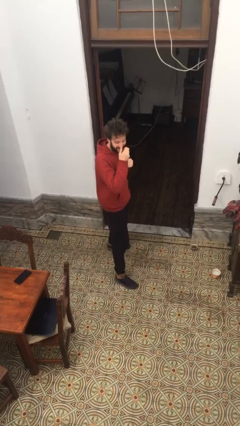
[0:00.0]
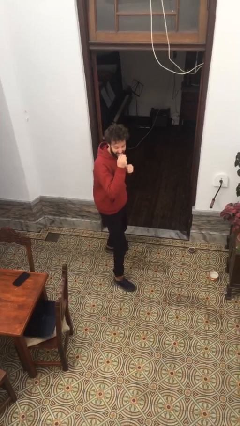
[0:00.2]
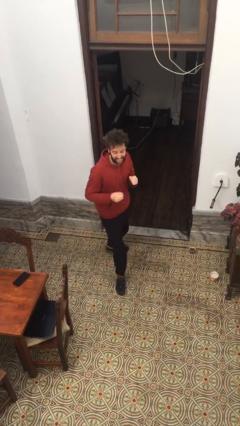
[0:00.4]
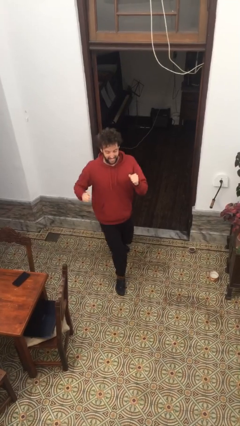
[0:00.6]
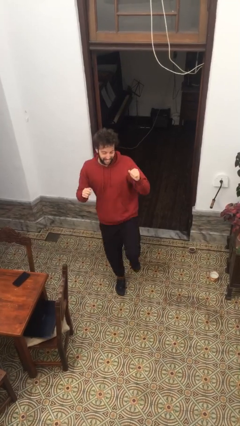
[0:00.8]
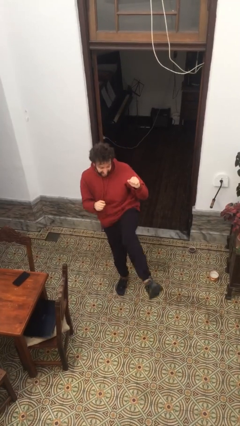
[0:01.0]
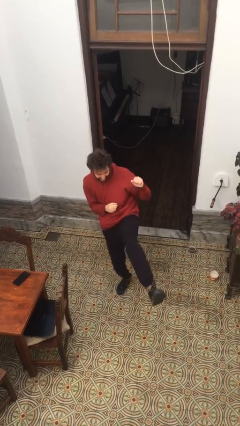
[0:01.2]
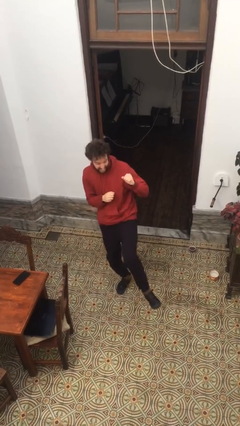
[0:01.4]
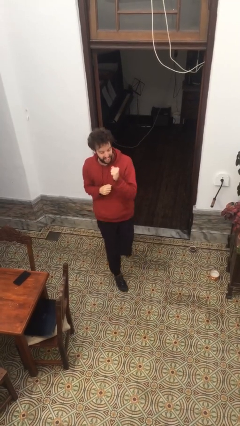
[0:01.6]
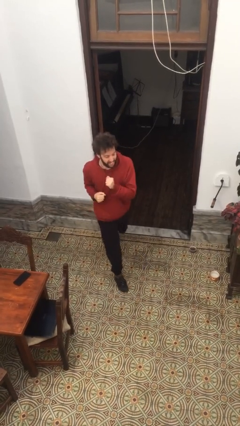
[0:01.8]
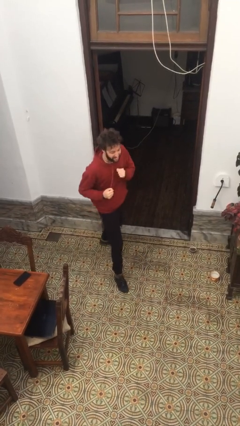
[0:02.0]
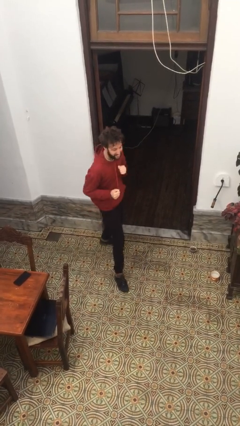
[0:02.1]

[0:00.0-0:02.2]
person karate kicks

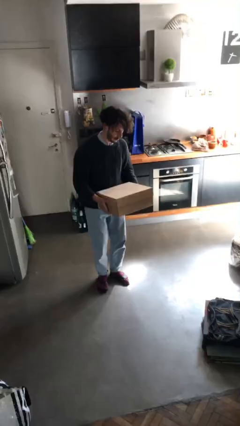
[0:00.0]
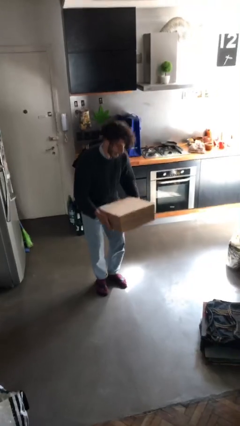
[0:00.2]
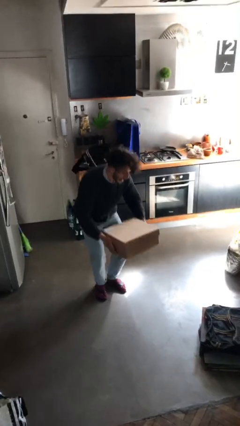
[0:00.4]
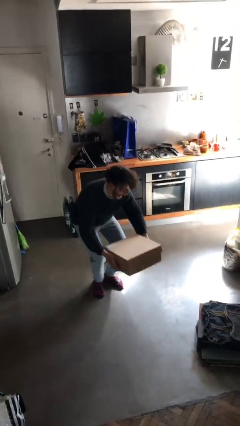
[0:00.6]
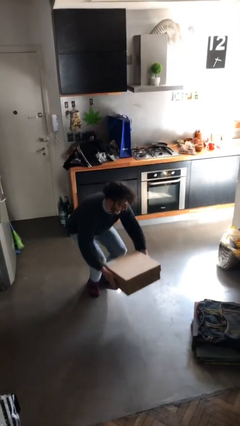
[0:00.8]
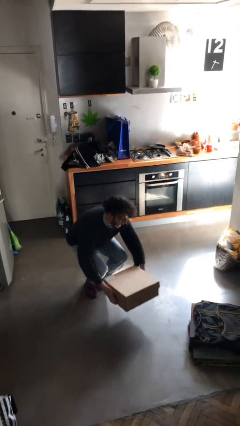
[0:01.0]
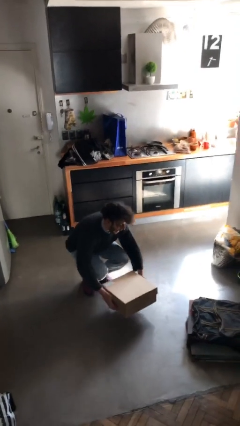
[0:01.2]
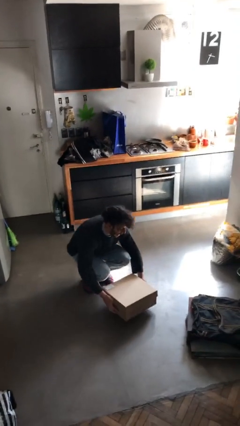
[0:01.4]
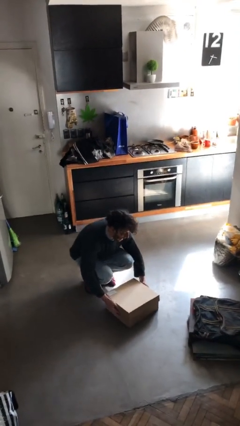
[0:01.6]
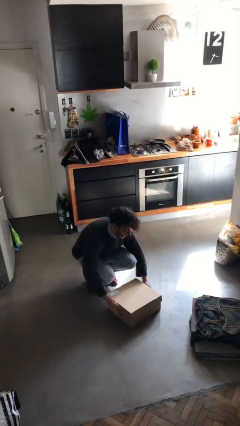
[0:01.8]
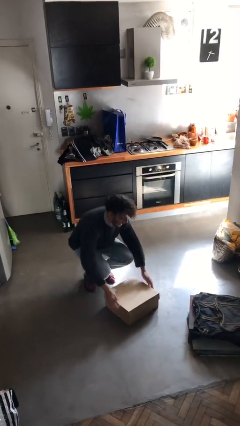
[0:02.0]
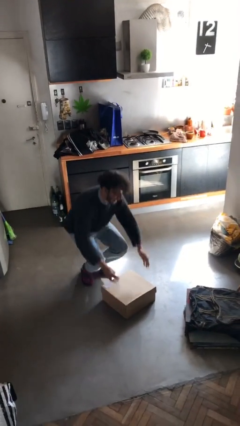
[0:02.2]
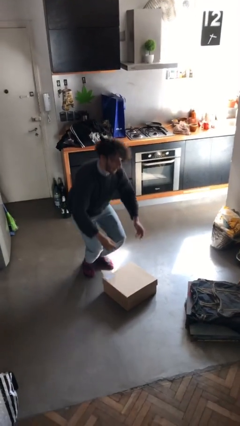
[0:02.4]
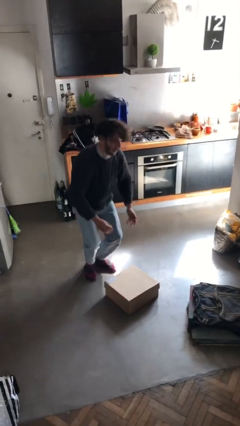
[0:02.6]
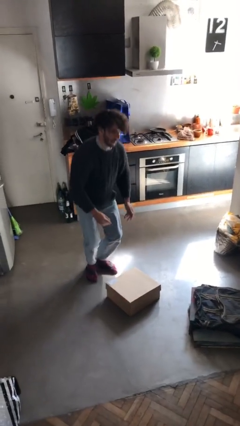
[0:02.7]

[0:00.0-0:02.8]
person puts down object on floor

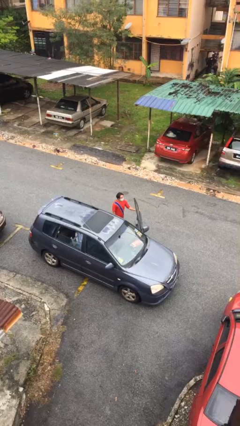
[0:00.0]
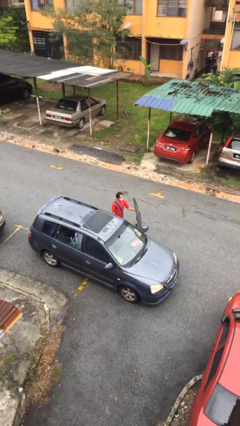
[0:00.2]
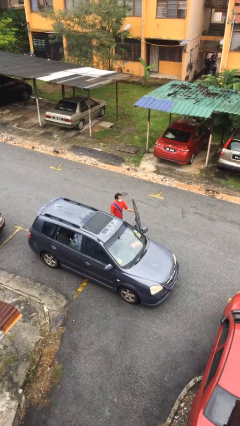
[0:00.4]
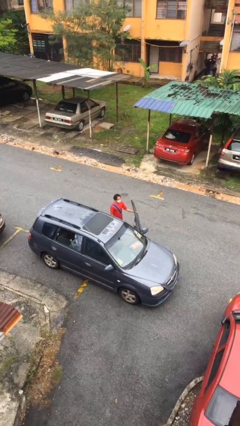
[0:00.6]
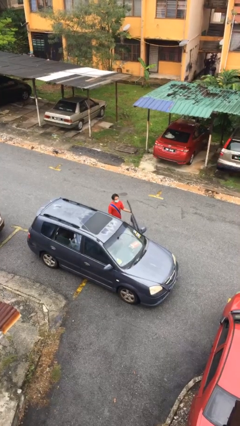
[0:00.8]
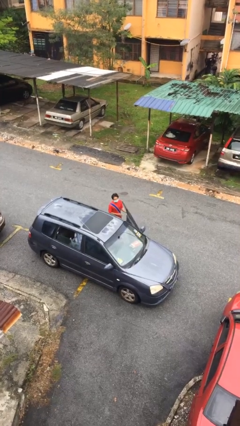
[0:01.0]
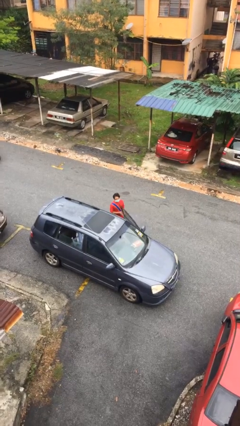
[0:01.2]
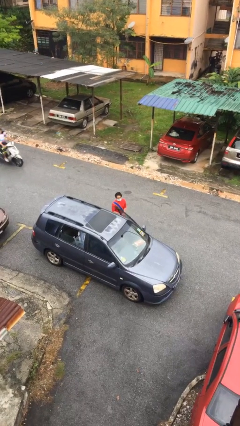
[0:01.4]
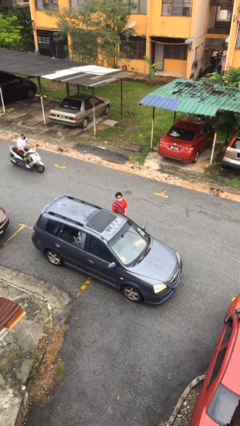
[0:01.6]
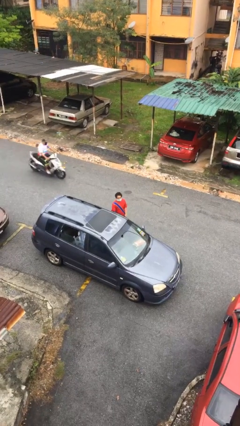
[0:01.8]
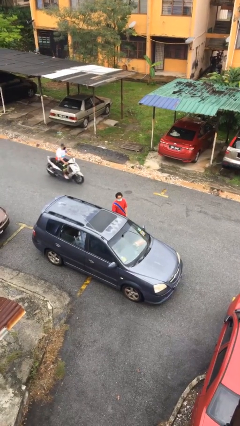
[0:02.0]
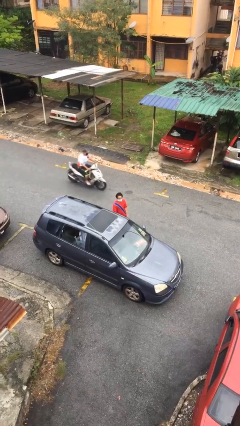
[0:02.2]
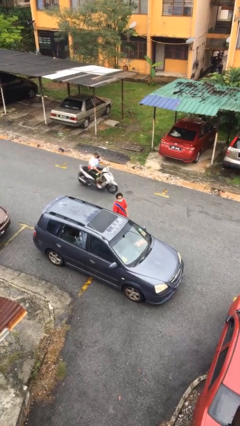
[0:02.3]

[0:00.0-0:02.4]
person closes car door

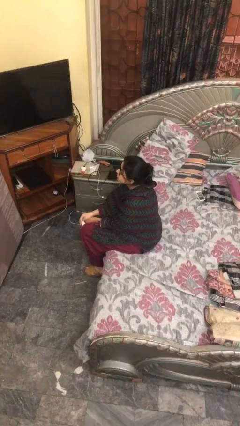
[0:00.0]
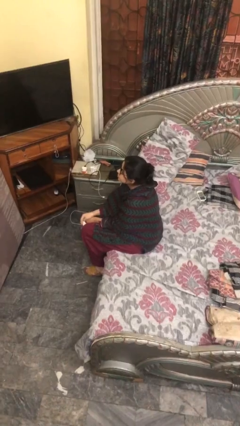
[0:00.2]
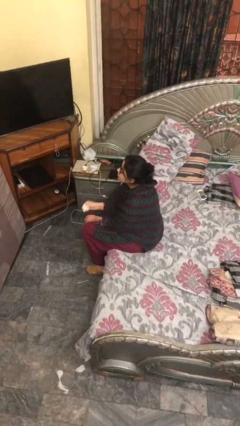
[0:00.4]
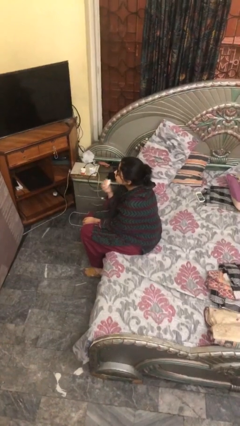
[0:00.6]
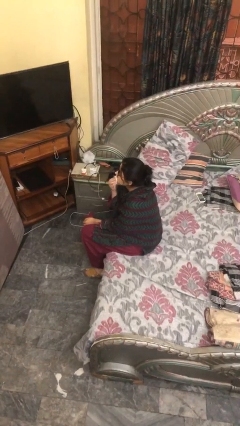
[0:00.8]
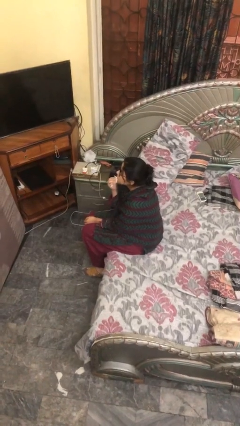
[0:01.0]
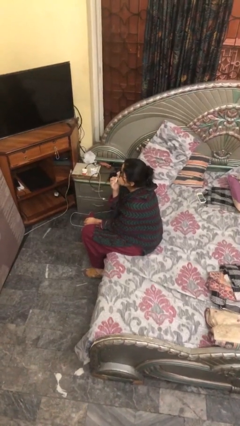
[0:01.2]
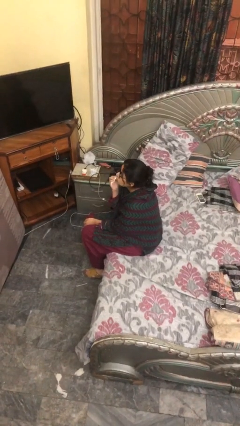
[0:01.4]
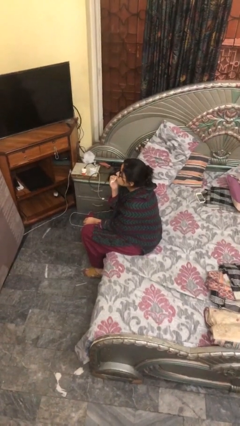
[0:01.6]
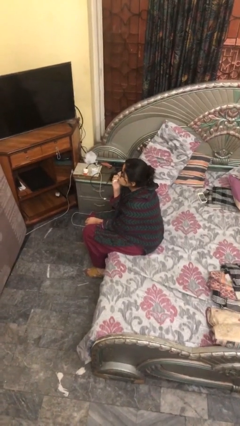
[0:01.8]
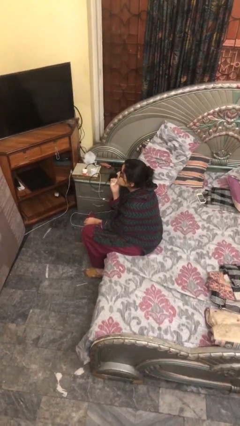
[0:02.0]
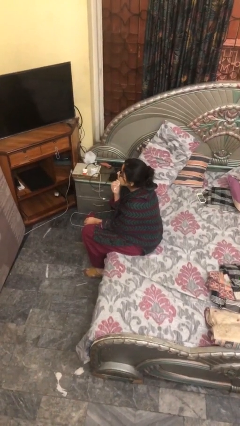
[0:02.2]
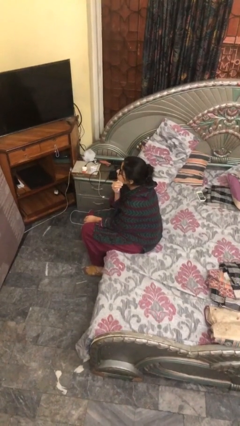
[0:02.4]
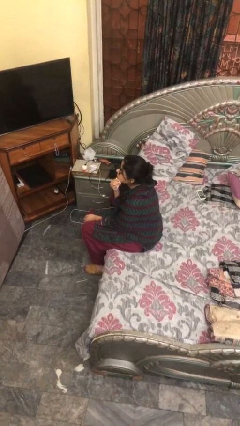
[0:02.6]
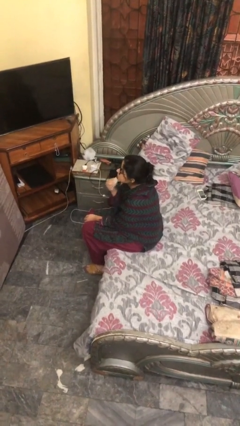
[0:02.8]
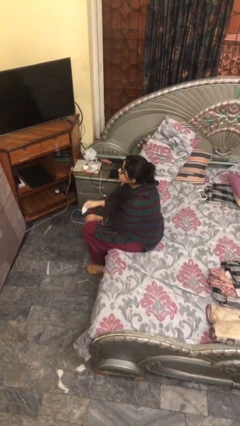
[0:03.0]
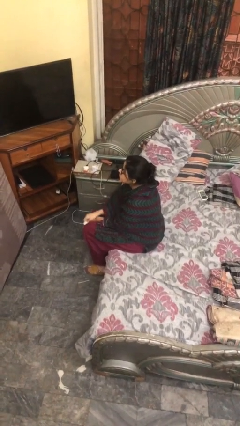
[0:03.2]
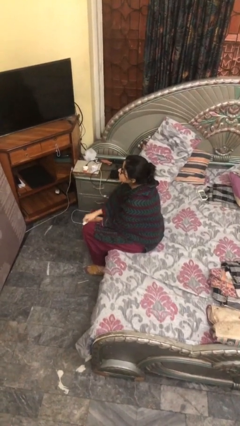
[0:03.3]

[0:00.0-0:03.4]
person wipes mouth with napkin

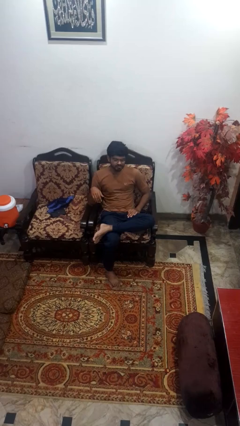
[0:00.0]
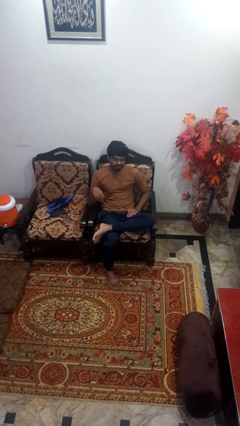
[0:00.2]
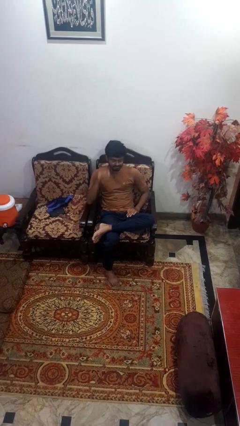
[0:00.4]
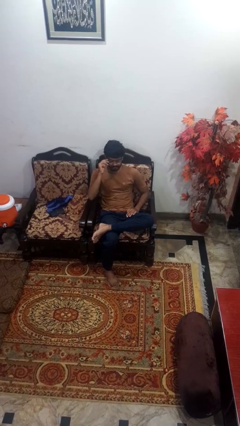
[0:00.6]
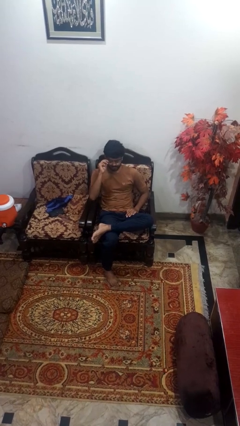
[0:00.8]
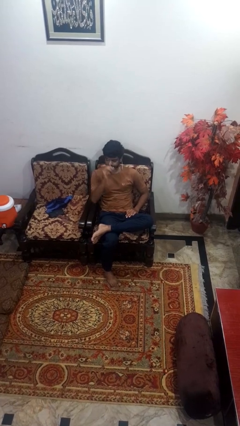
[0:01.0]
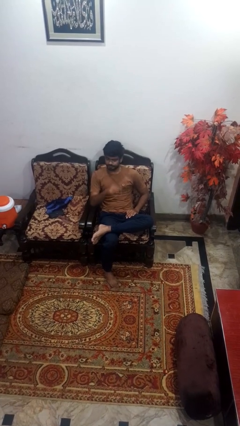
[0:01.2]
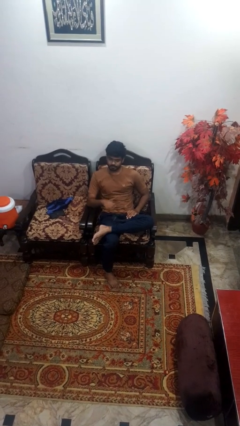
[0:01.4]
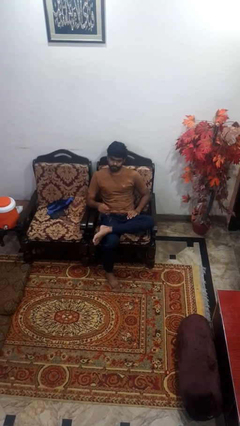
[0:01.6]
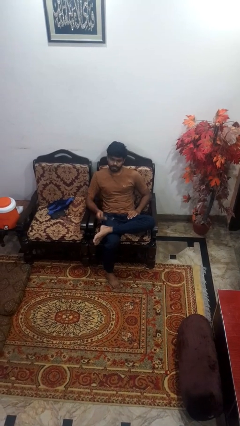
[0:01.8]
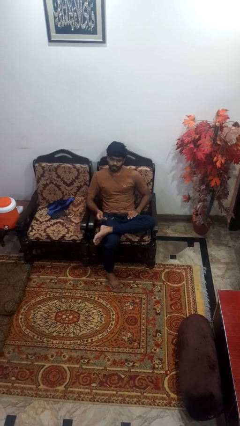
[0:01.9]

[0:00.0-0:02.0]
person takes off glasses

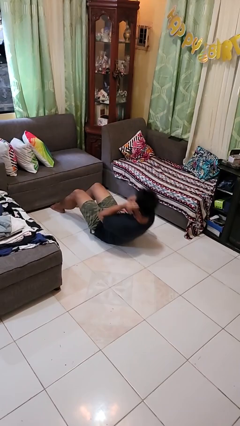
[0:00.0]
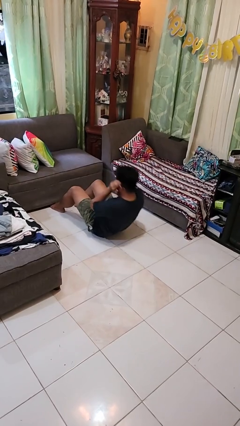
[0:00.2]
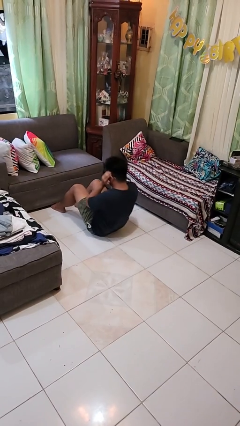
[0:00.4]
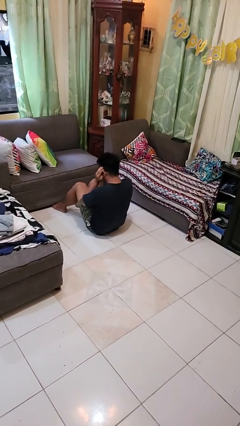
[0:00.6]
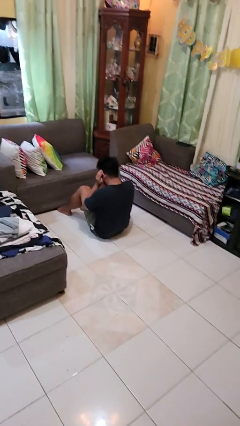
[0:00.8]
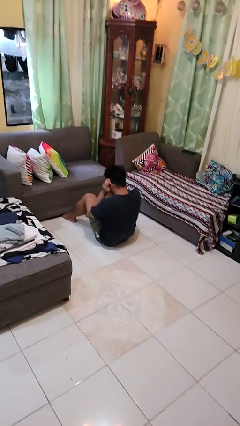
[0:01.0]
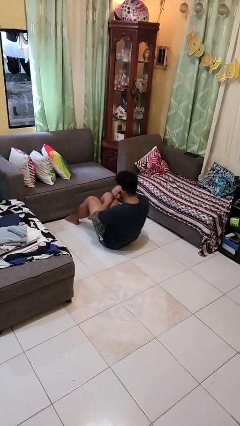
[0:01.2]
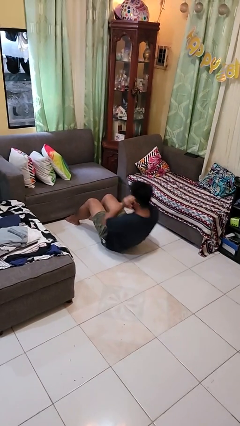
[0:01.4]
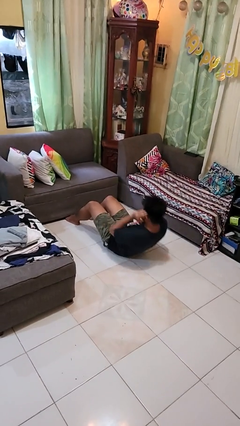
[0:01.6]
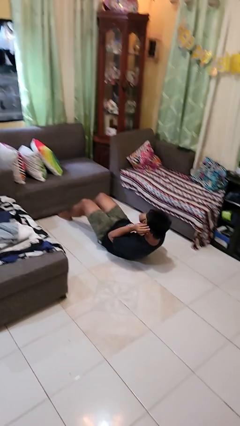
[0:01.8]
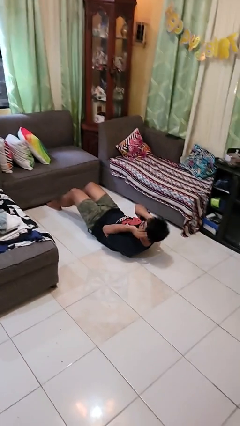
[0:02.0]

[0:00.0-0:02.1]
person exercises with situp

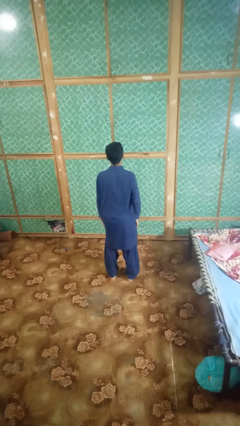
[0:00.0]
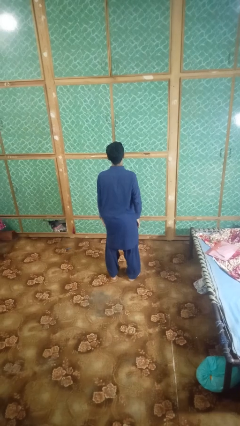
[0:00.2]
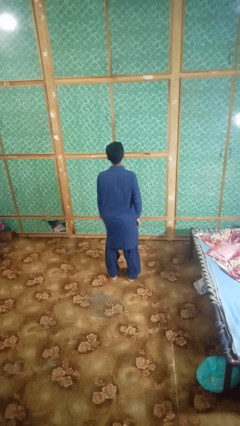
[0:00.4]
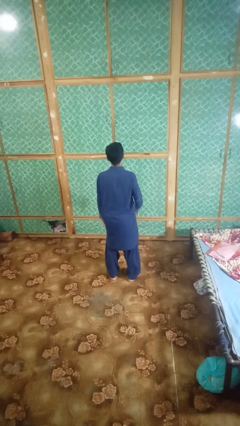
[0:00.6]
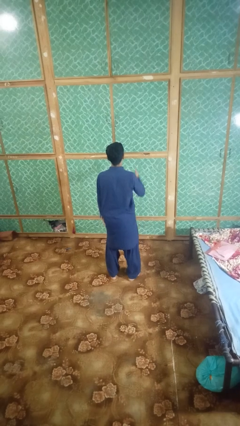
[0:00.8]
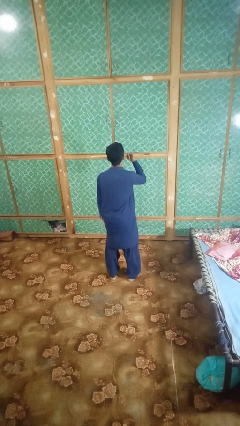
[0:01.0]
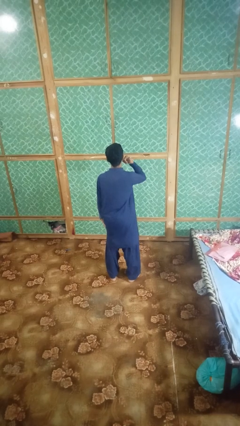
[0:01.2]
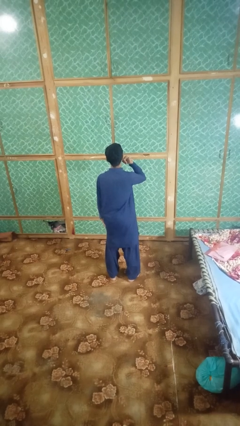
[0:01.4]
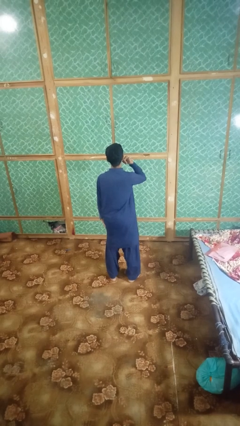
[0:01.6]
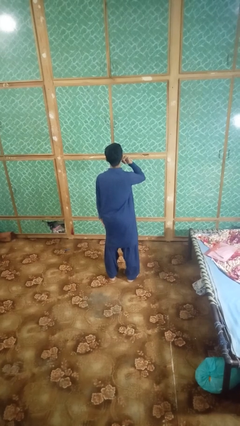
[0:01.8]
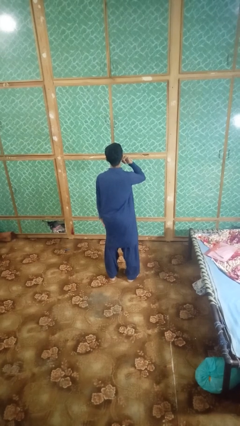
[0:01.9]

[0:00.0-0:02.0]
person gestures call me
